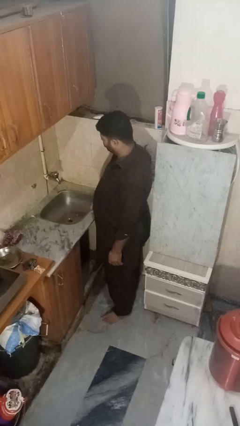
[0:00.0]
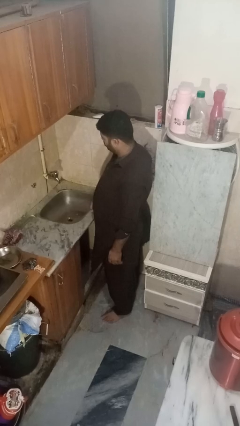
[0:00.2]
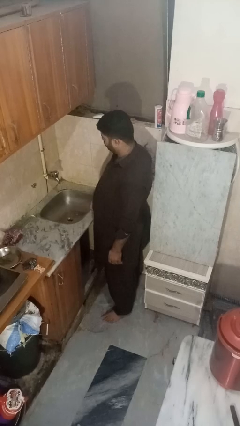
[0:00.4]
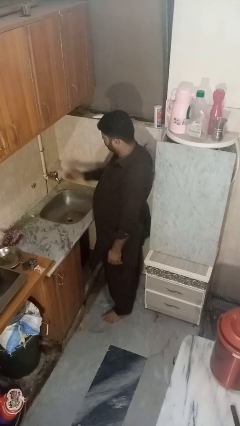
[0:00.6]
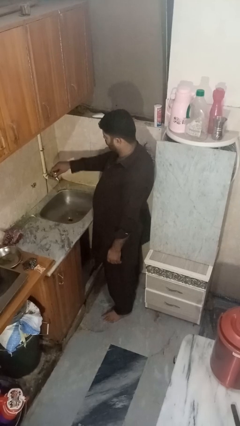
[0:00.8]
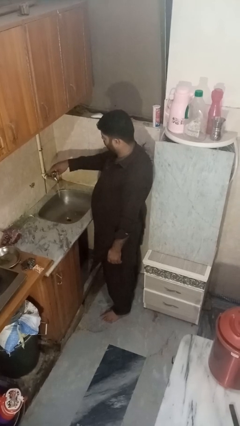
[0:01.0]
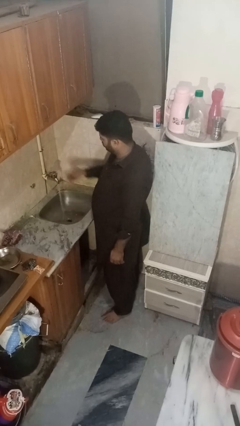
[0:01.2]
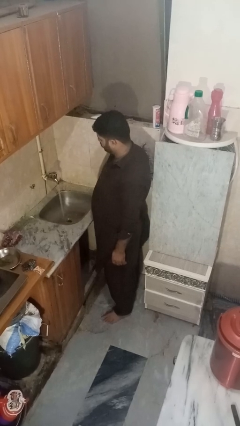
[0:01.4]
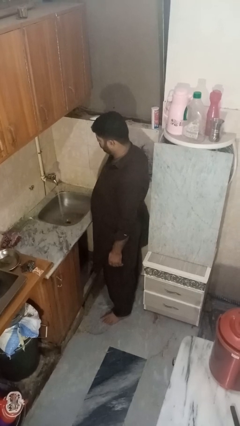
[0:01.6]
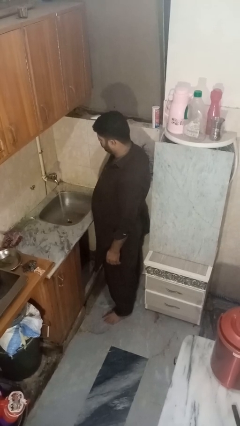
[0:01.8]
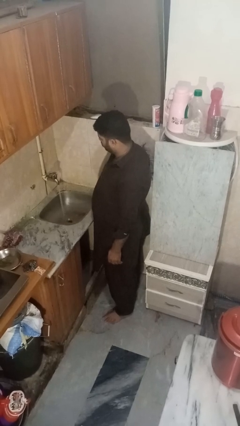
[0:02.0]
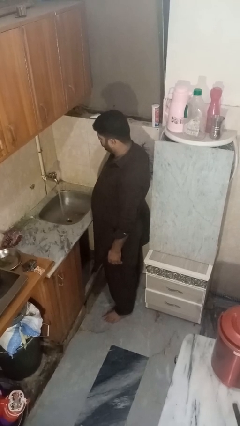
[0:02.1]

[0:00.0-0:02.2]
person turns on faucet

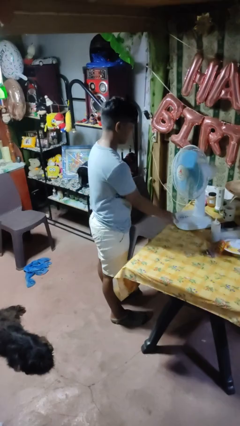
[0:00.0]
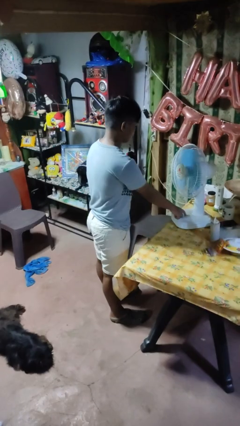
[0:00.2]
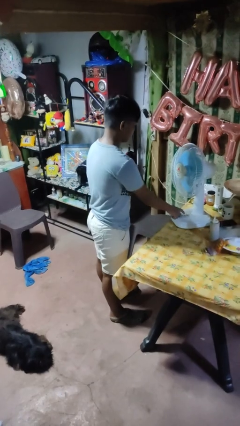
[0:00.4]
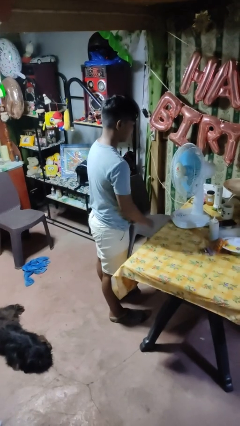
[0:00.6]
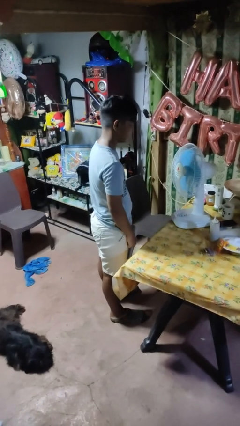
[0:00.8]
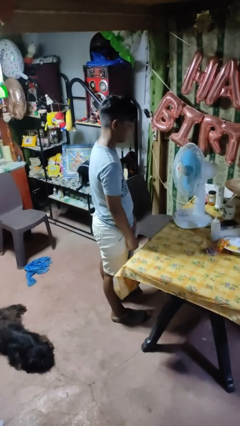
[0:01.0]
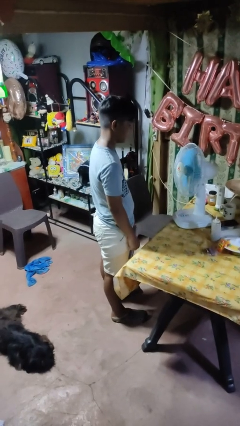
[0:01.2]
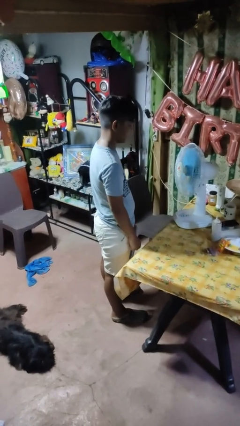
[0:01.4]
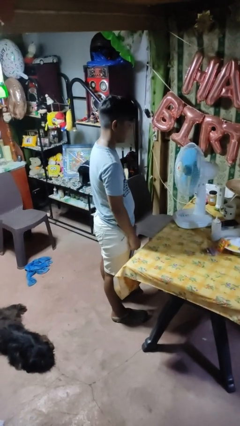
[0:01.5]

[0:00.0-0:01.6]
person turns on fan

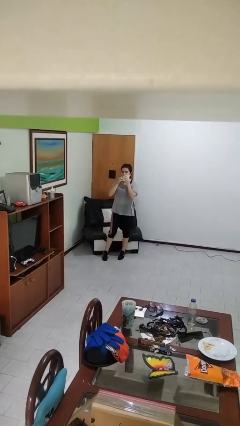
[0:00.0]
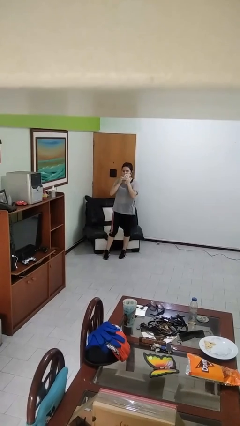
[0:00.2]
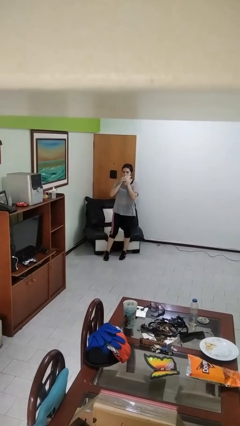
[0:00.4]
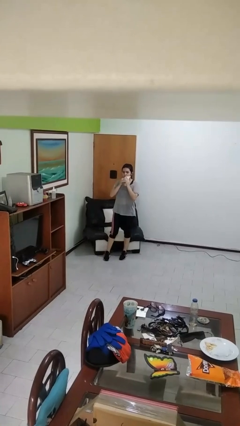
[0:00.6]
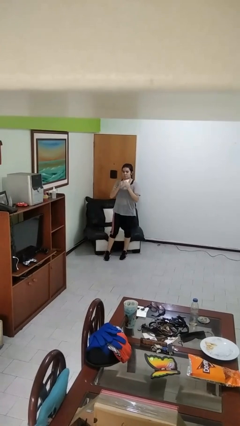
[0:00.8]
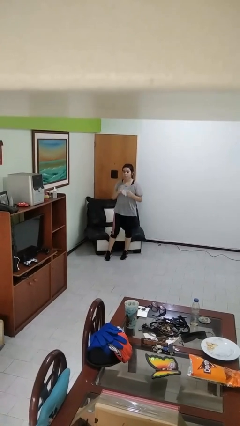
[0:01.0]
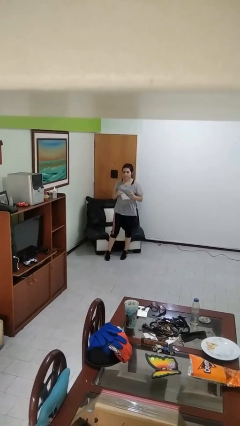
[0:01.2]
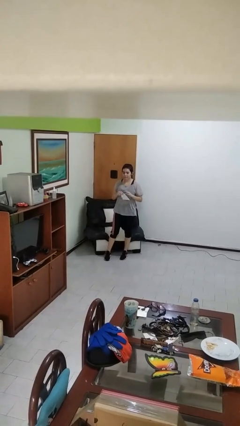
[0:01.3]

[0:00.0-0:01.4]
person wipes mouth with napkin

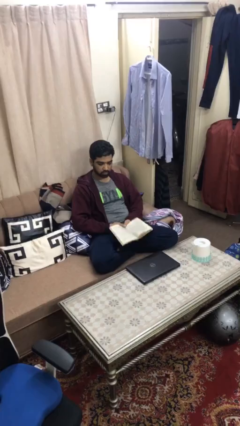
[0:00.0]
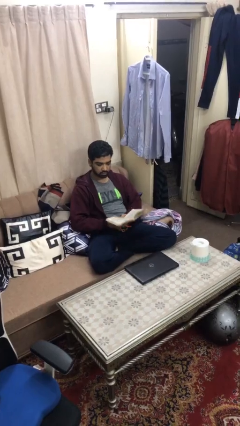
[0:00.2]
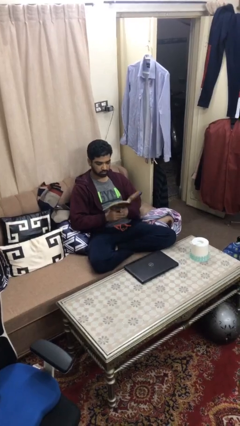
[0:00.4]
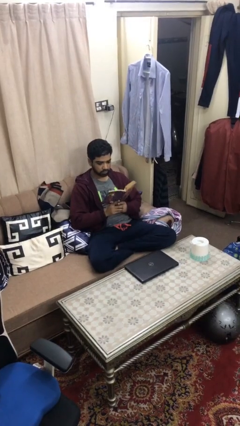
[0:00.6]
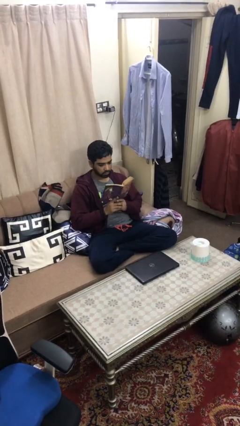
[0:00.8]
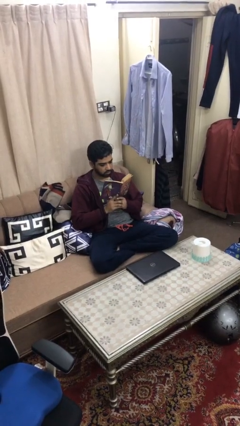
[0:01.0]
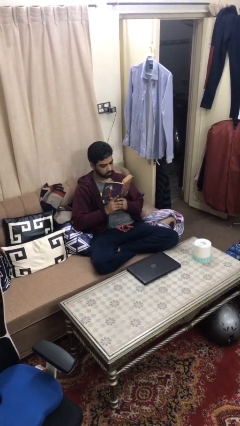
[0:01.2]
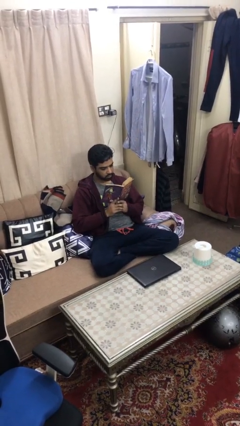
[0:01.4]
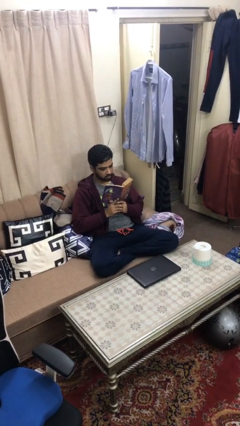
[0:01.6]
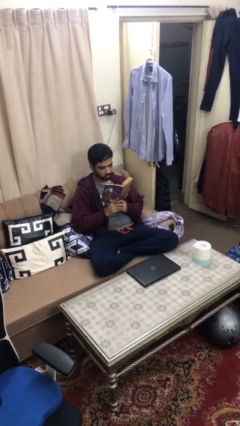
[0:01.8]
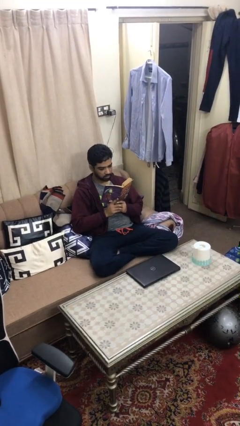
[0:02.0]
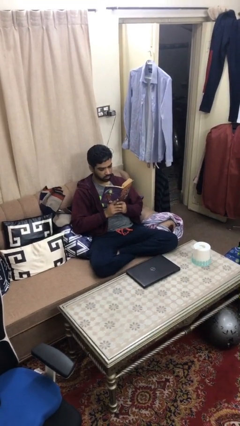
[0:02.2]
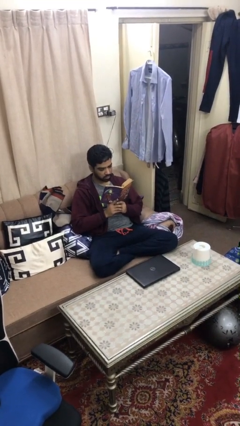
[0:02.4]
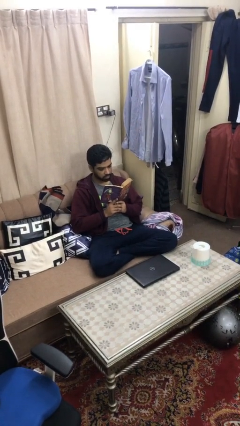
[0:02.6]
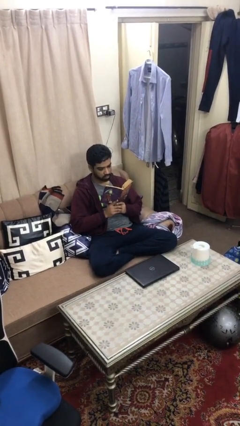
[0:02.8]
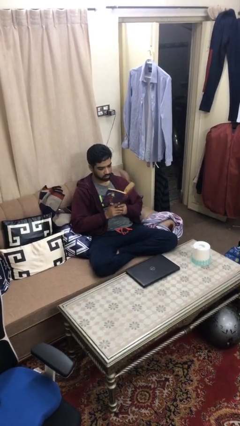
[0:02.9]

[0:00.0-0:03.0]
person reads document

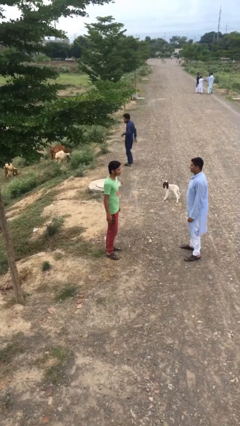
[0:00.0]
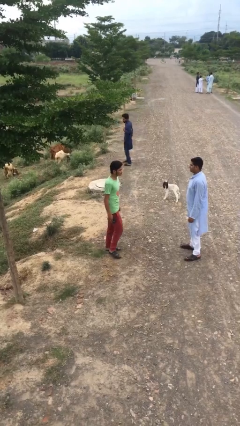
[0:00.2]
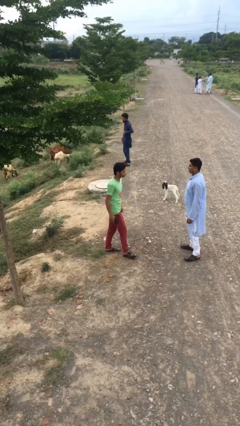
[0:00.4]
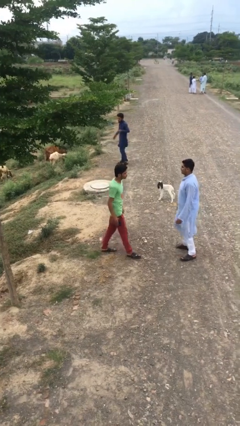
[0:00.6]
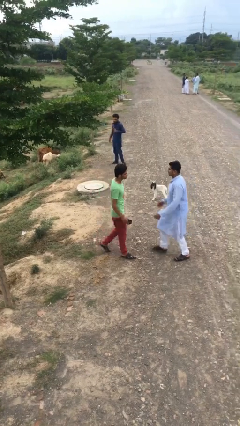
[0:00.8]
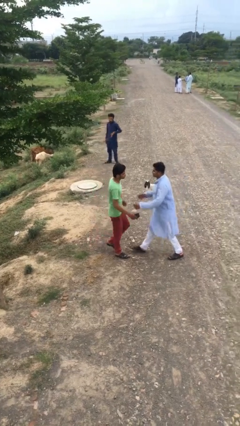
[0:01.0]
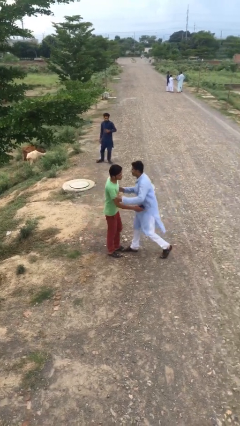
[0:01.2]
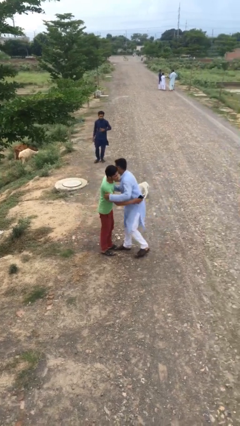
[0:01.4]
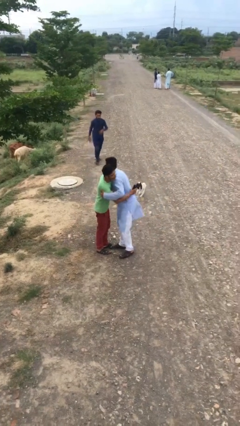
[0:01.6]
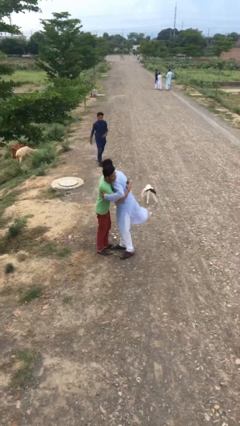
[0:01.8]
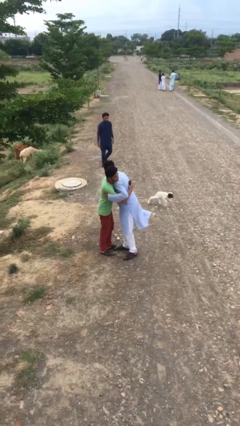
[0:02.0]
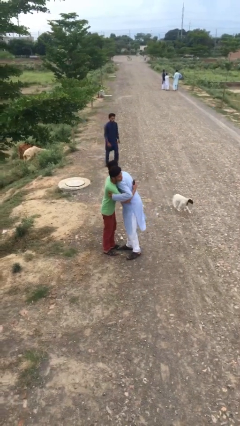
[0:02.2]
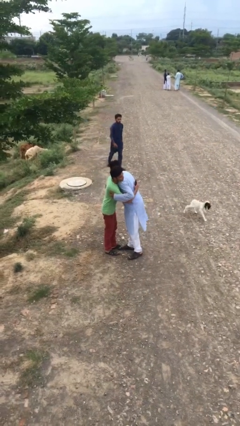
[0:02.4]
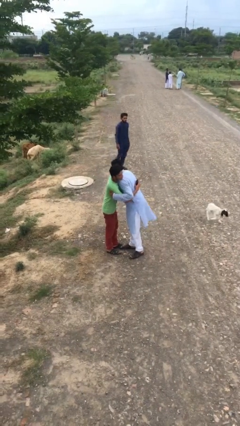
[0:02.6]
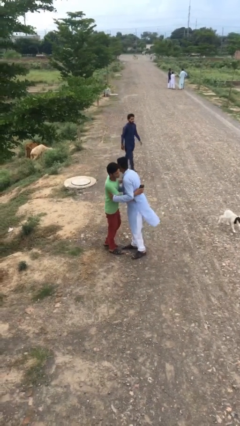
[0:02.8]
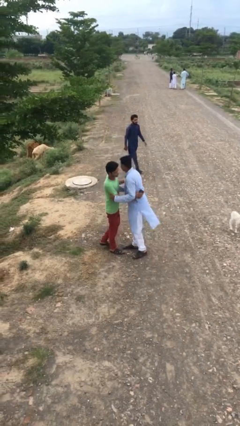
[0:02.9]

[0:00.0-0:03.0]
person embraces person

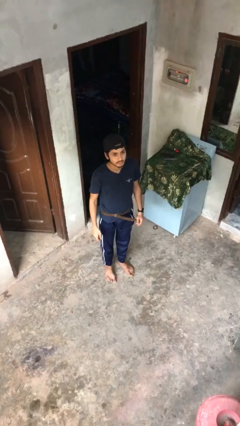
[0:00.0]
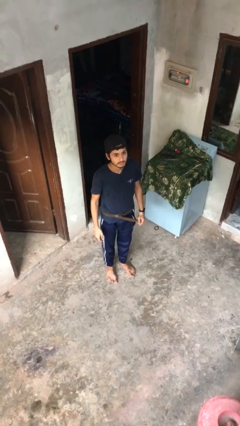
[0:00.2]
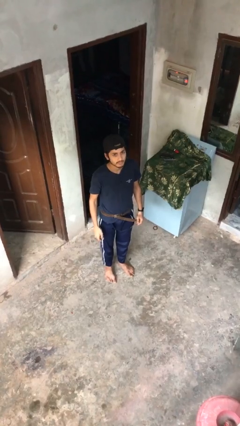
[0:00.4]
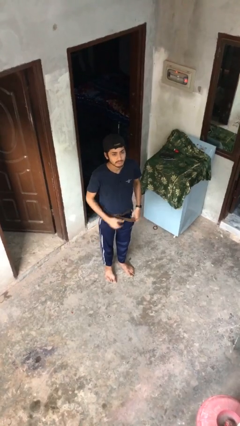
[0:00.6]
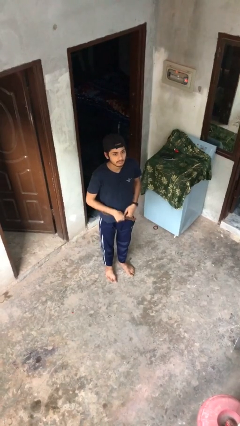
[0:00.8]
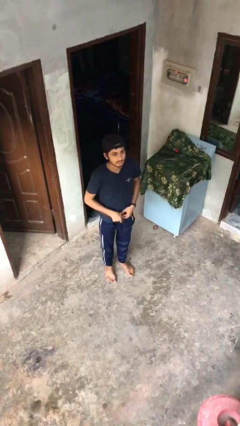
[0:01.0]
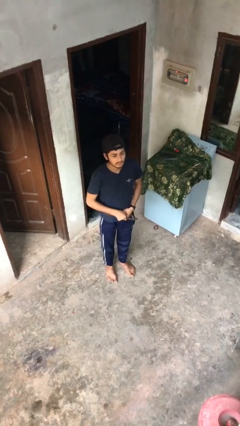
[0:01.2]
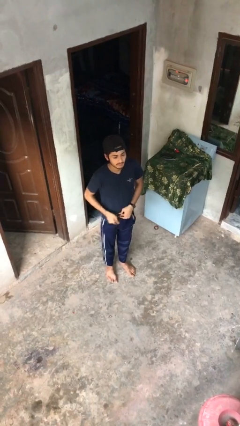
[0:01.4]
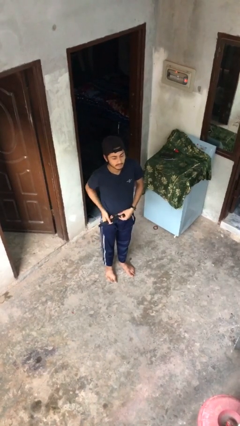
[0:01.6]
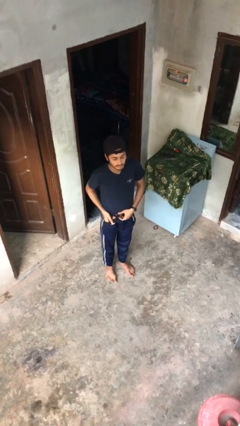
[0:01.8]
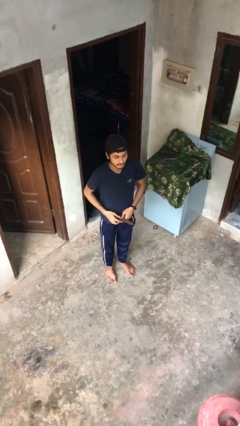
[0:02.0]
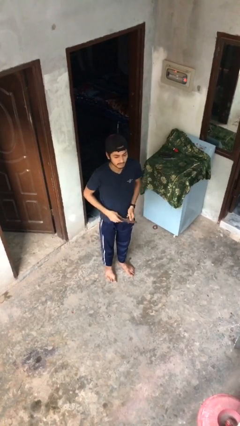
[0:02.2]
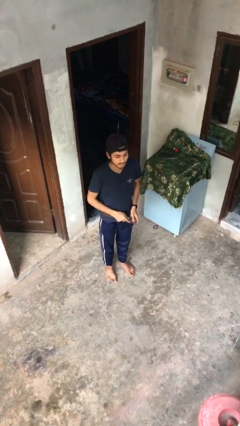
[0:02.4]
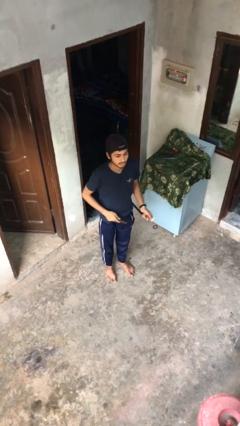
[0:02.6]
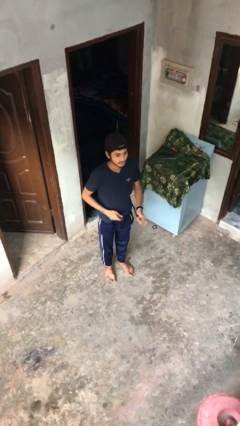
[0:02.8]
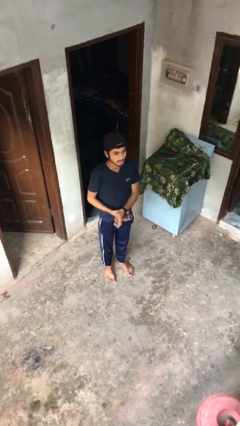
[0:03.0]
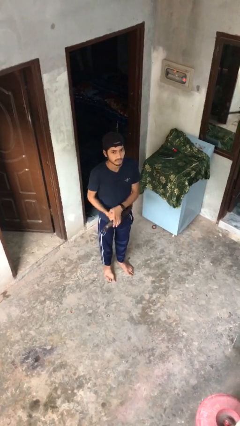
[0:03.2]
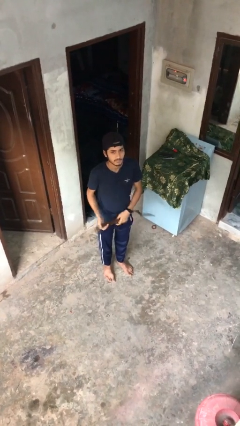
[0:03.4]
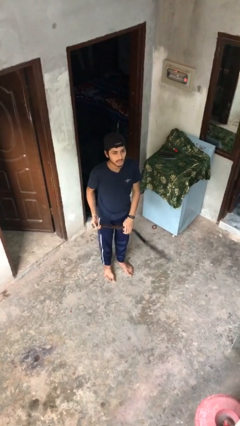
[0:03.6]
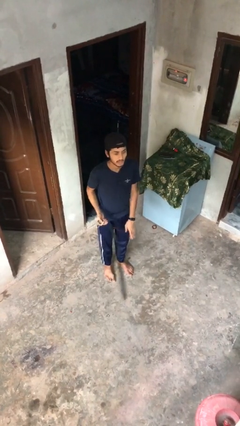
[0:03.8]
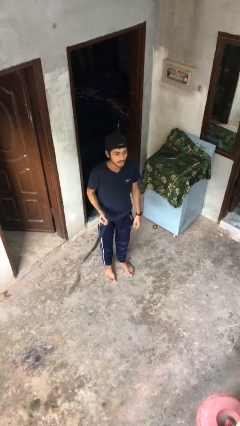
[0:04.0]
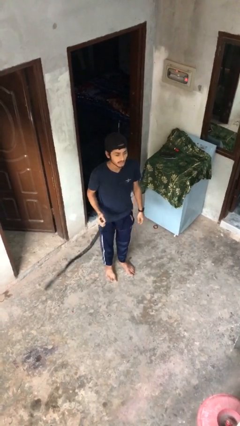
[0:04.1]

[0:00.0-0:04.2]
person takes off belt

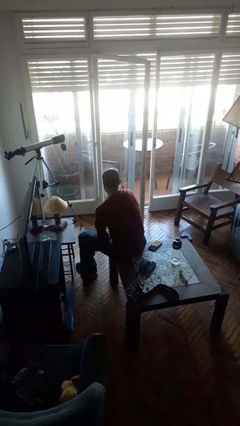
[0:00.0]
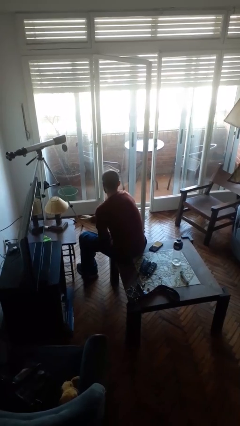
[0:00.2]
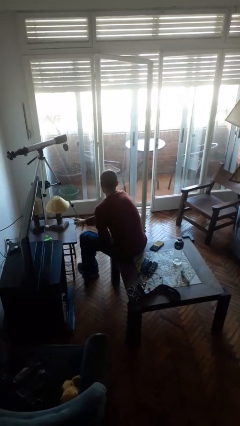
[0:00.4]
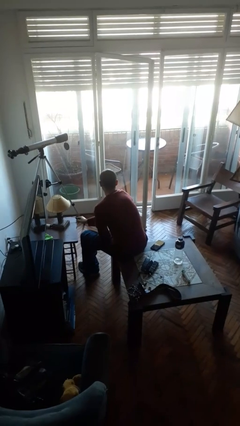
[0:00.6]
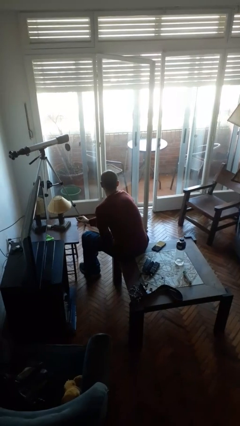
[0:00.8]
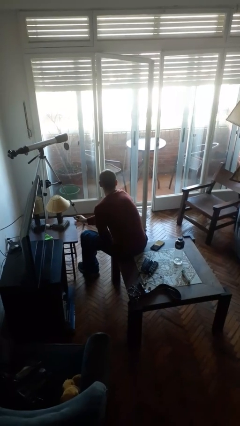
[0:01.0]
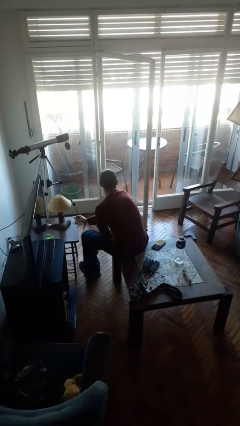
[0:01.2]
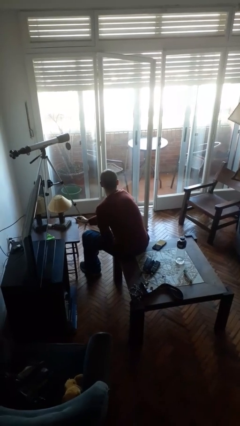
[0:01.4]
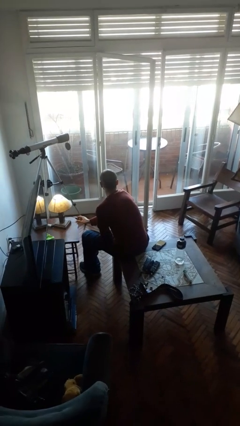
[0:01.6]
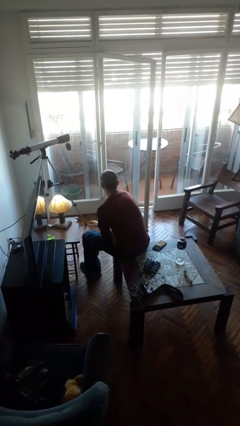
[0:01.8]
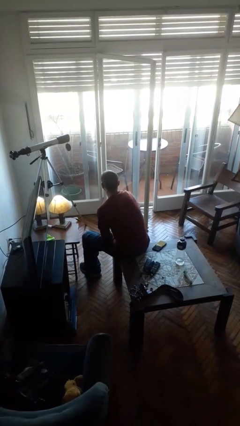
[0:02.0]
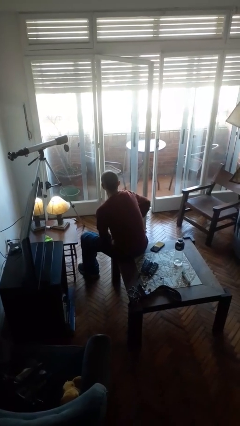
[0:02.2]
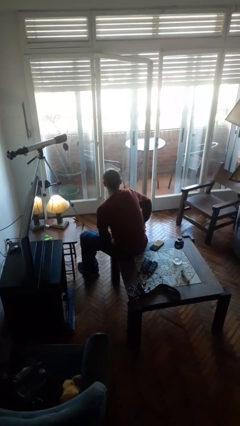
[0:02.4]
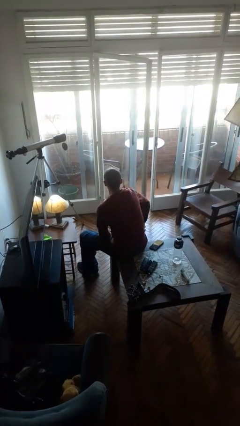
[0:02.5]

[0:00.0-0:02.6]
person turns on lamp
